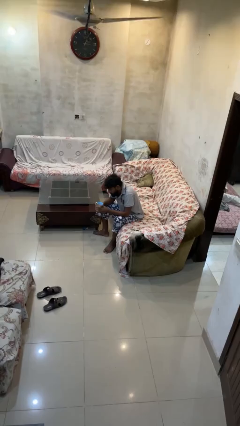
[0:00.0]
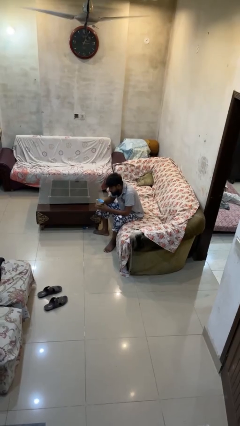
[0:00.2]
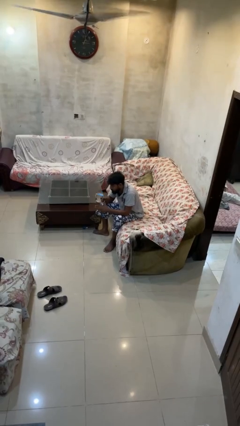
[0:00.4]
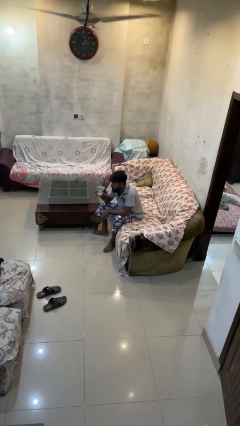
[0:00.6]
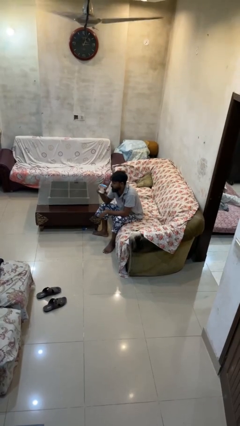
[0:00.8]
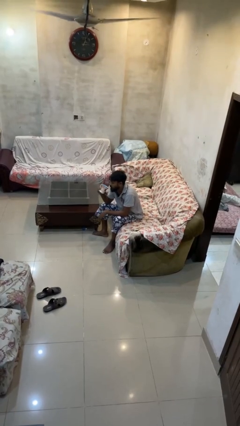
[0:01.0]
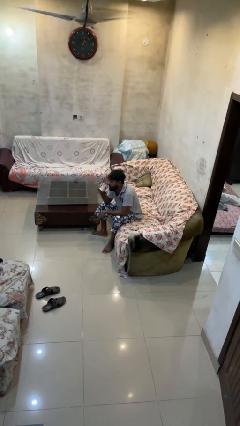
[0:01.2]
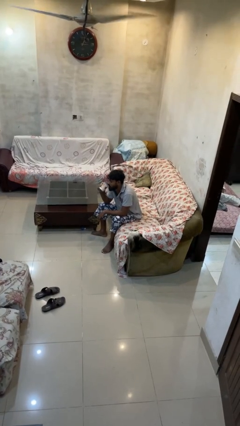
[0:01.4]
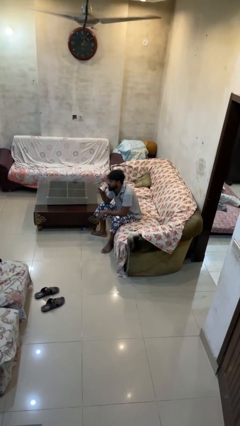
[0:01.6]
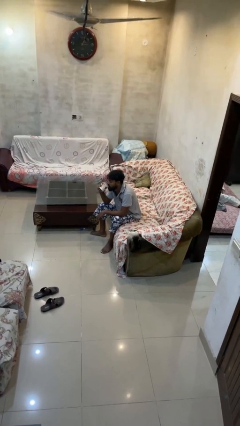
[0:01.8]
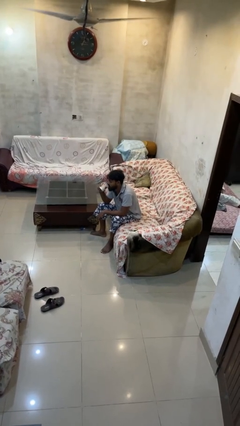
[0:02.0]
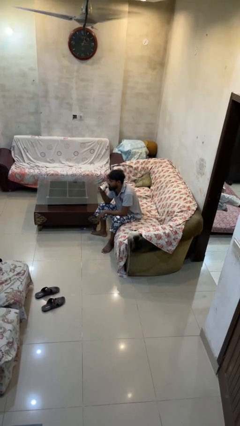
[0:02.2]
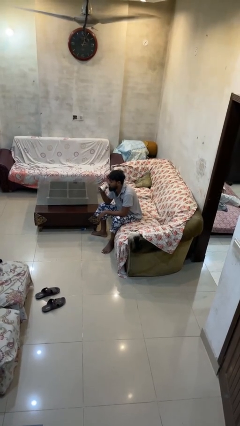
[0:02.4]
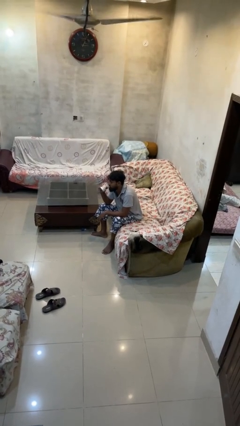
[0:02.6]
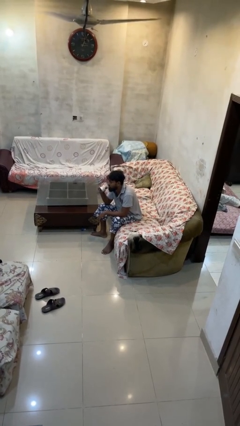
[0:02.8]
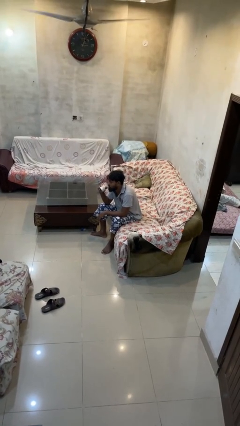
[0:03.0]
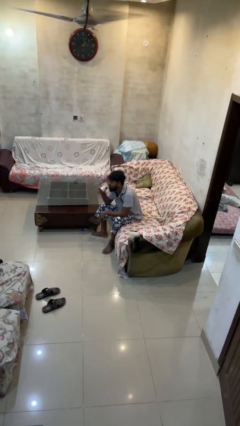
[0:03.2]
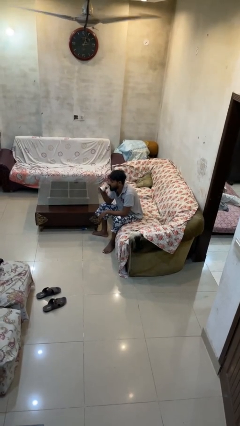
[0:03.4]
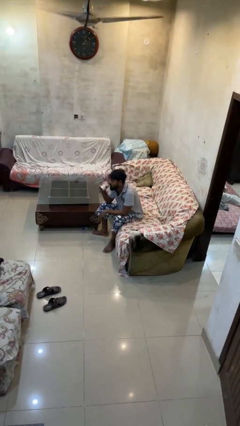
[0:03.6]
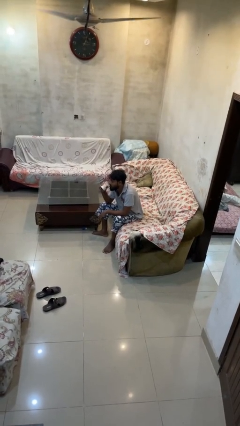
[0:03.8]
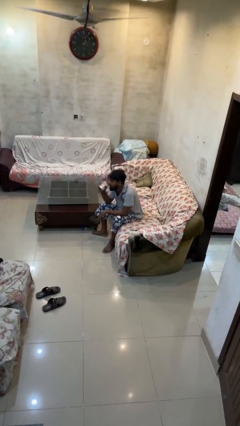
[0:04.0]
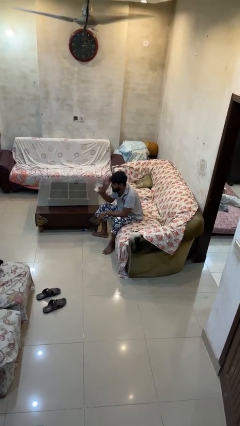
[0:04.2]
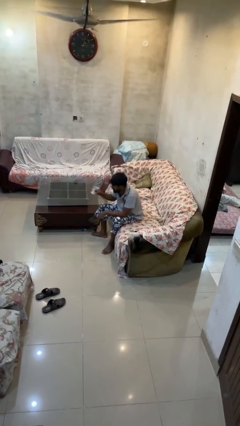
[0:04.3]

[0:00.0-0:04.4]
person drinks from mug

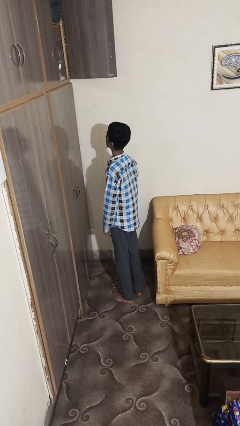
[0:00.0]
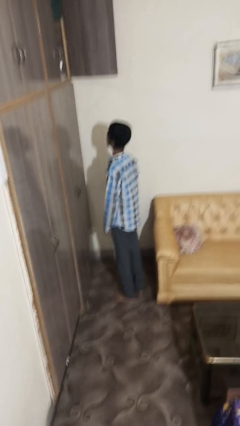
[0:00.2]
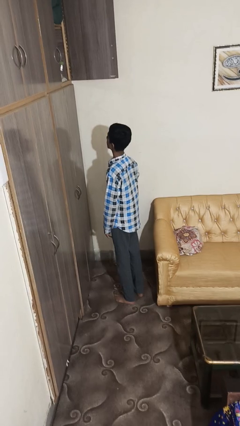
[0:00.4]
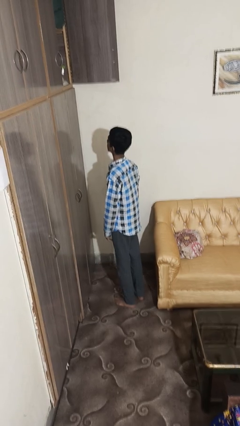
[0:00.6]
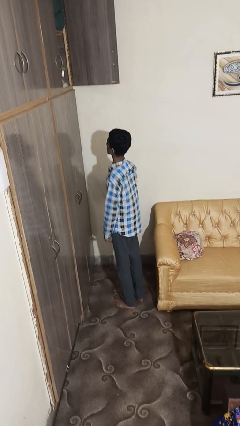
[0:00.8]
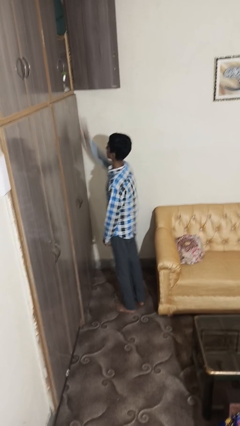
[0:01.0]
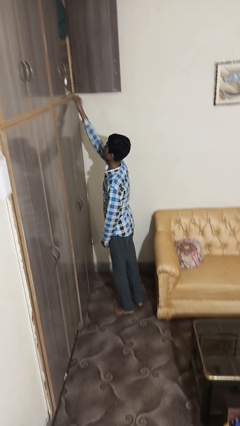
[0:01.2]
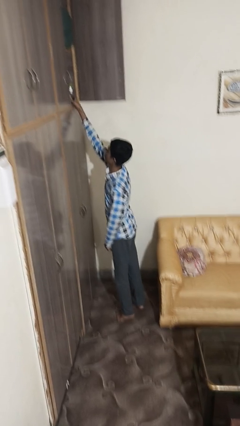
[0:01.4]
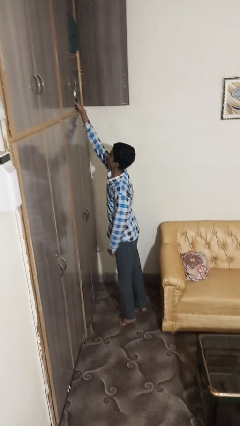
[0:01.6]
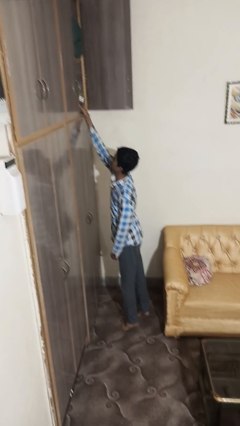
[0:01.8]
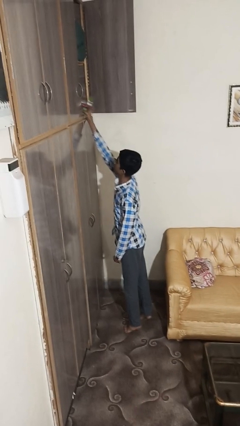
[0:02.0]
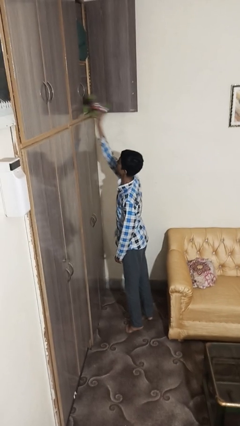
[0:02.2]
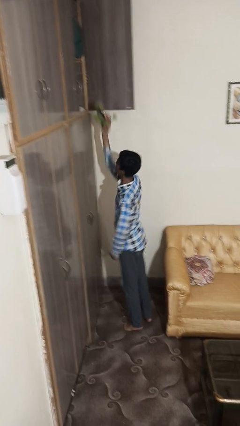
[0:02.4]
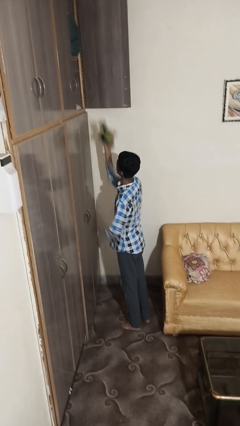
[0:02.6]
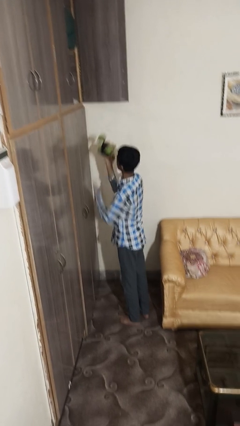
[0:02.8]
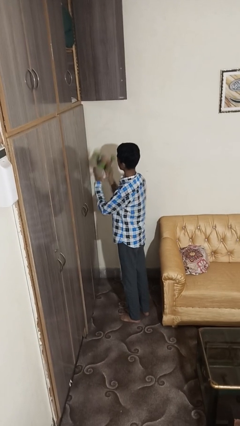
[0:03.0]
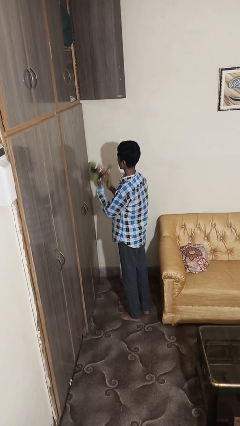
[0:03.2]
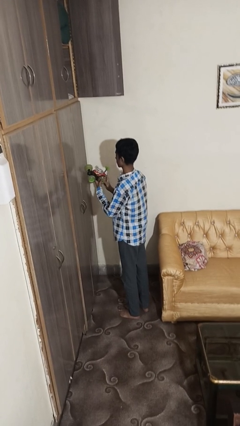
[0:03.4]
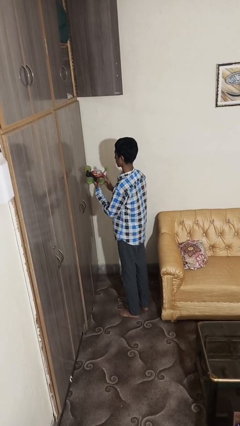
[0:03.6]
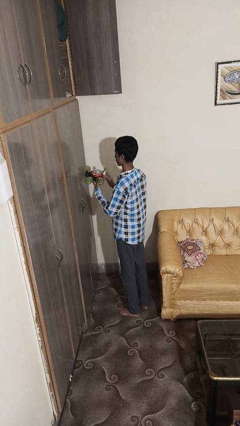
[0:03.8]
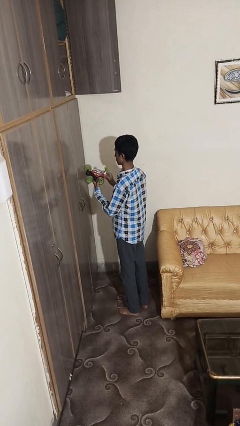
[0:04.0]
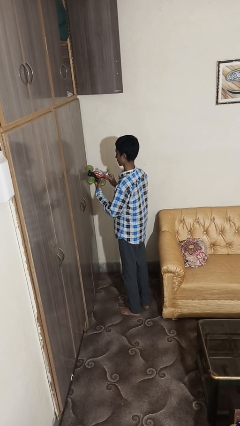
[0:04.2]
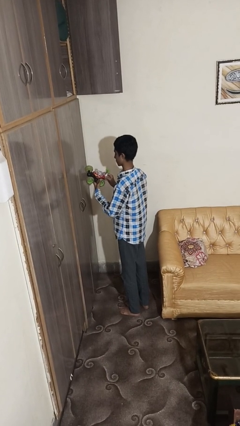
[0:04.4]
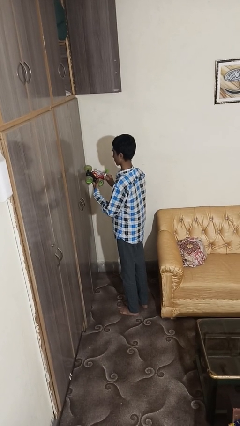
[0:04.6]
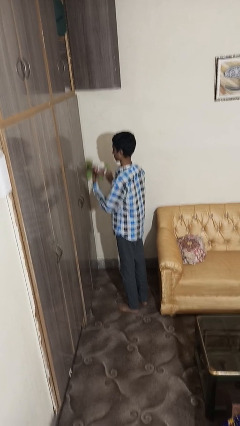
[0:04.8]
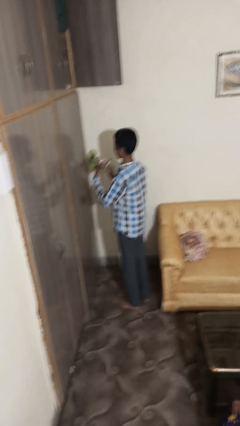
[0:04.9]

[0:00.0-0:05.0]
person picks up object from shelf

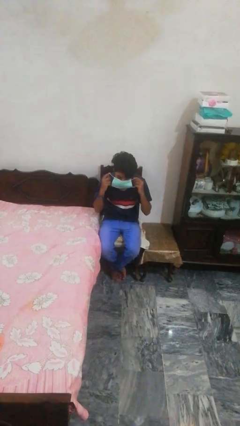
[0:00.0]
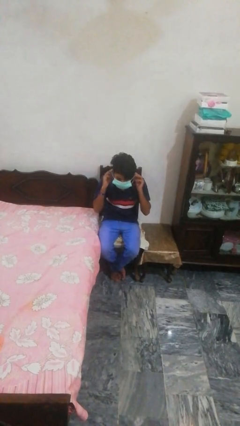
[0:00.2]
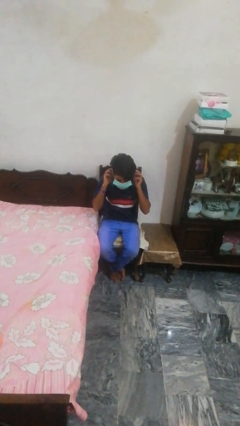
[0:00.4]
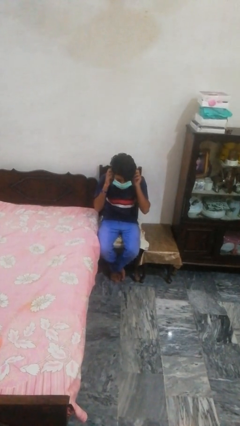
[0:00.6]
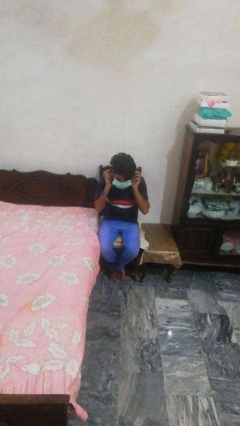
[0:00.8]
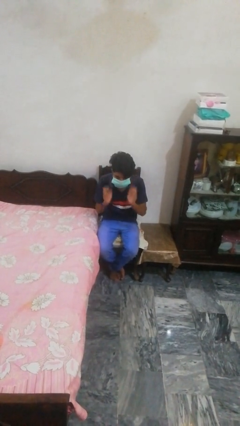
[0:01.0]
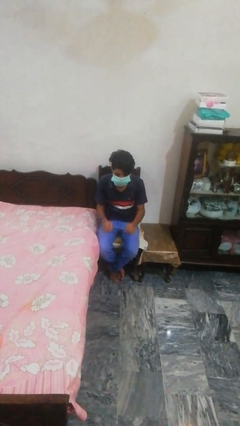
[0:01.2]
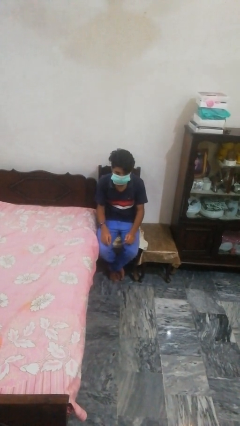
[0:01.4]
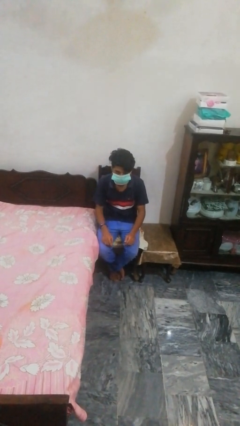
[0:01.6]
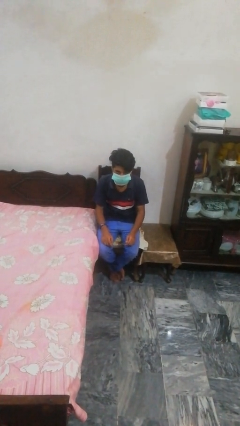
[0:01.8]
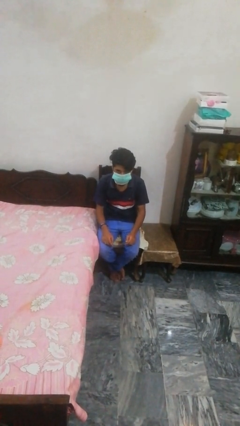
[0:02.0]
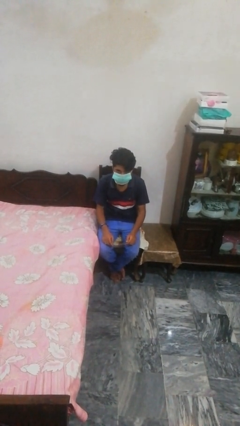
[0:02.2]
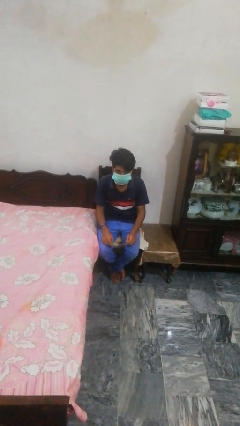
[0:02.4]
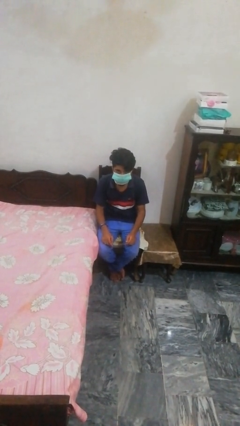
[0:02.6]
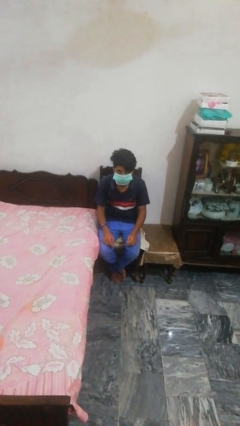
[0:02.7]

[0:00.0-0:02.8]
person puts on facemask

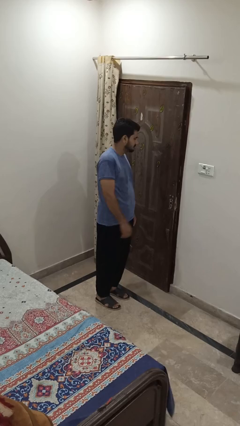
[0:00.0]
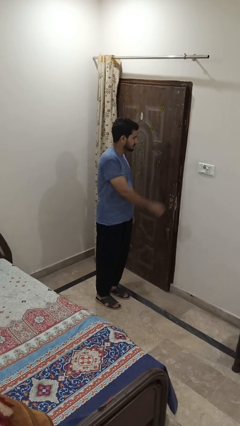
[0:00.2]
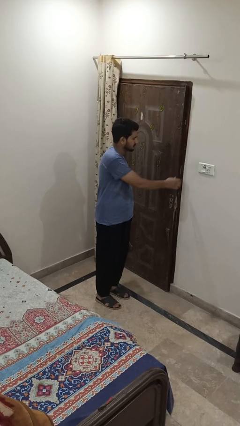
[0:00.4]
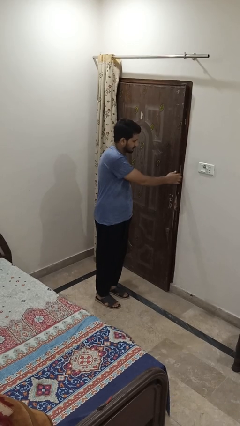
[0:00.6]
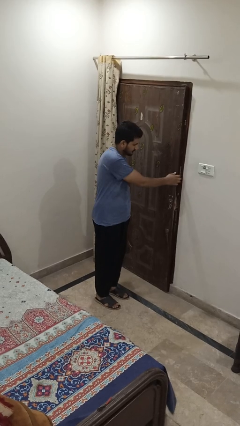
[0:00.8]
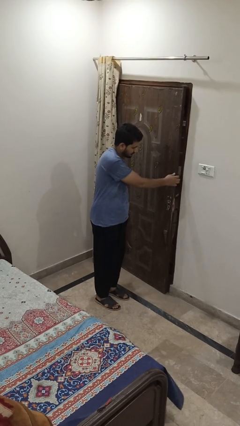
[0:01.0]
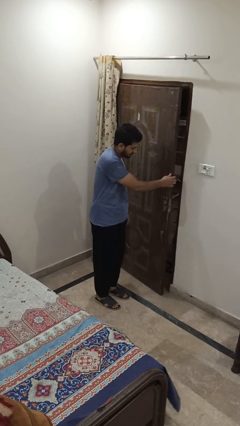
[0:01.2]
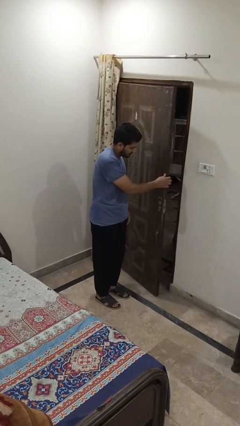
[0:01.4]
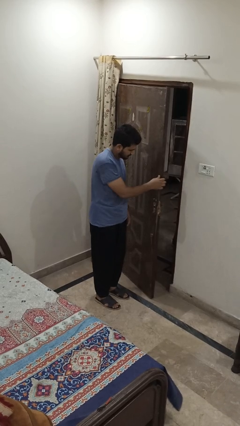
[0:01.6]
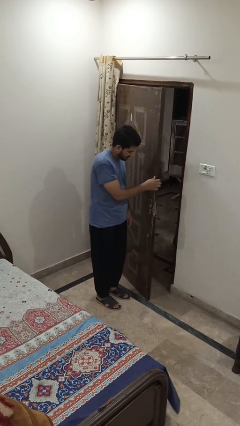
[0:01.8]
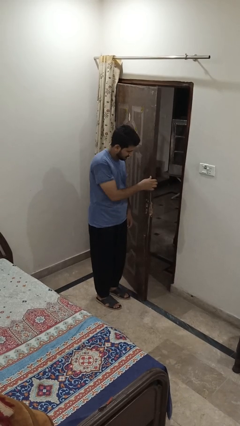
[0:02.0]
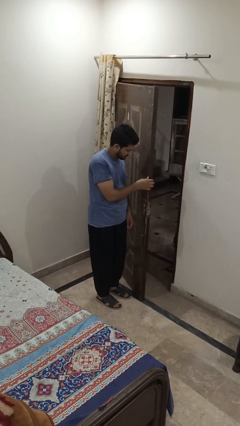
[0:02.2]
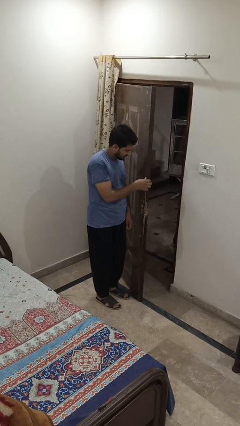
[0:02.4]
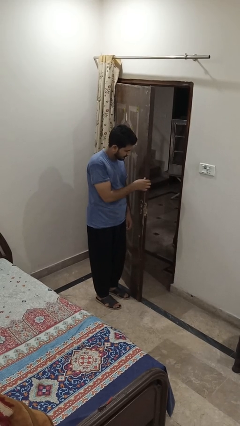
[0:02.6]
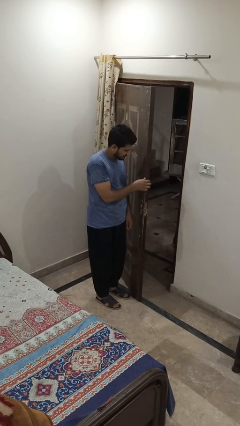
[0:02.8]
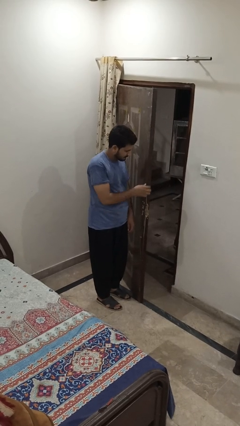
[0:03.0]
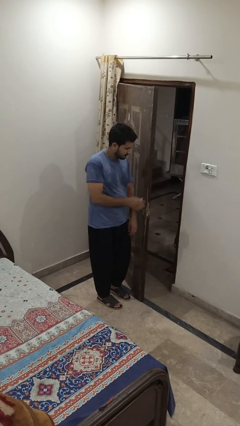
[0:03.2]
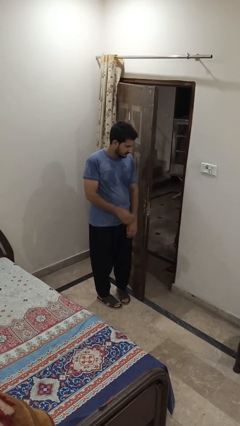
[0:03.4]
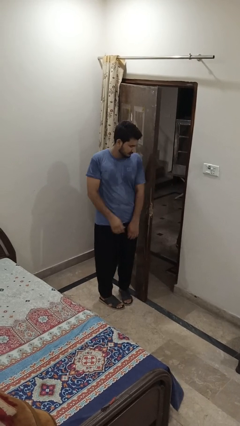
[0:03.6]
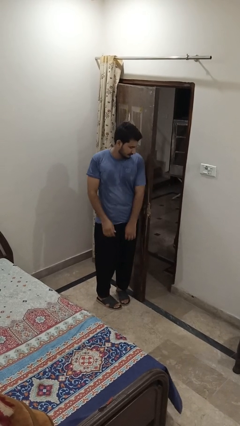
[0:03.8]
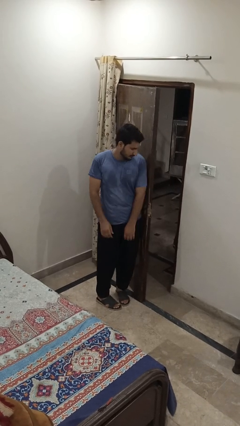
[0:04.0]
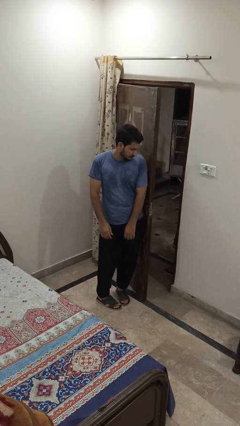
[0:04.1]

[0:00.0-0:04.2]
person opens facility door

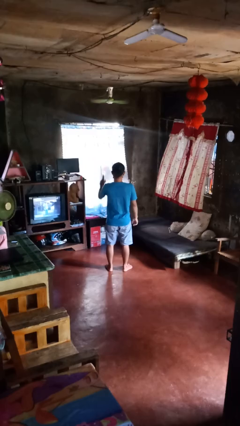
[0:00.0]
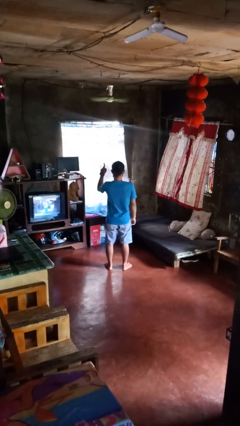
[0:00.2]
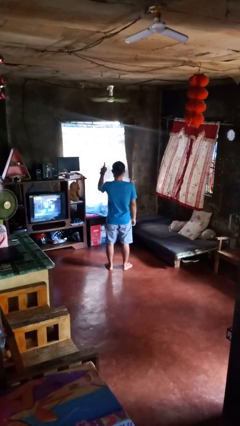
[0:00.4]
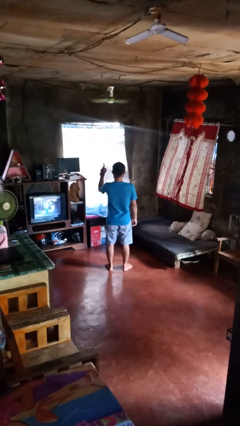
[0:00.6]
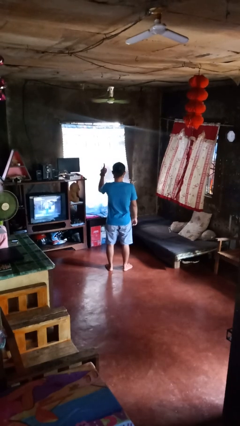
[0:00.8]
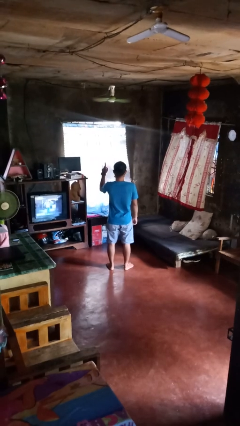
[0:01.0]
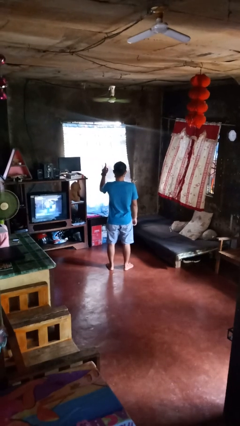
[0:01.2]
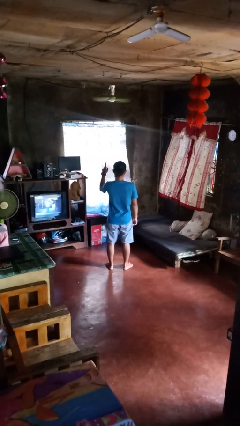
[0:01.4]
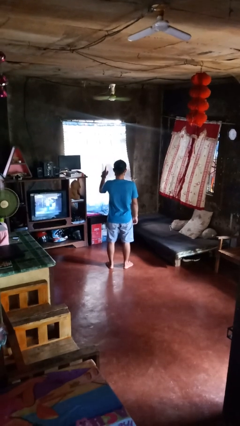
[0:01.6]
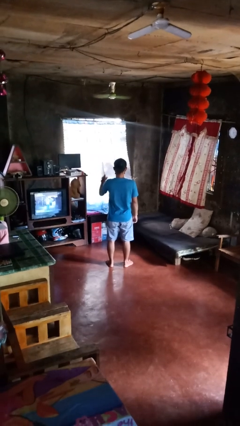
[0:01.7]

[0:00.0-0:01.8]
person gestures number one
